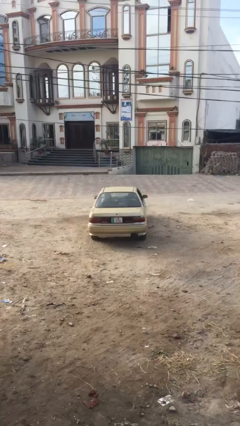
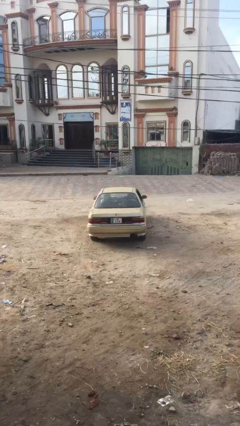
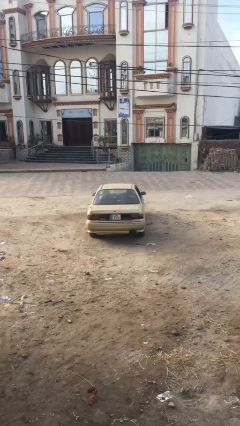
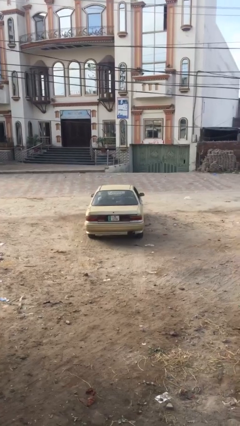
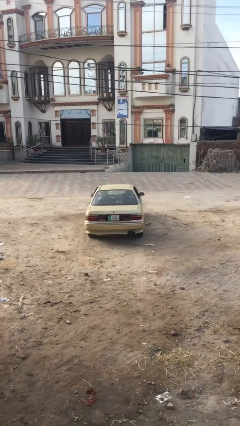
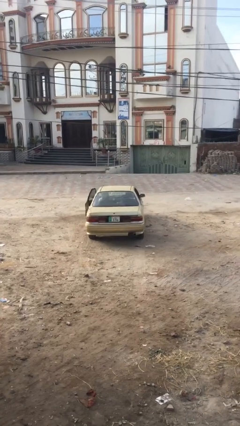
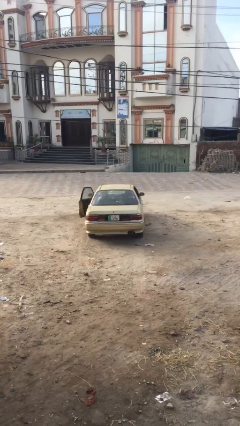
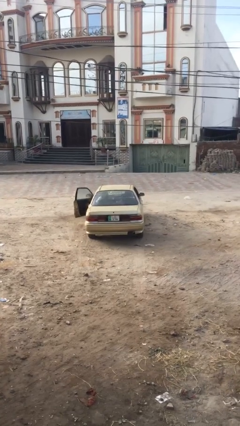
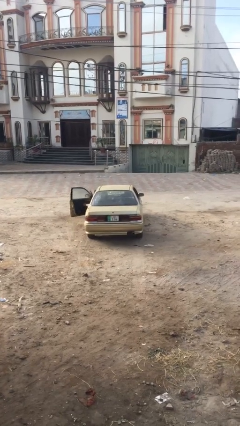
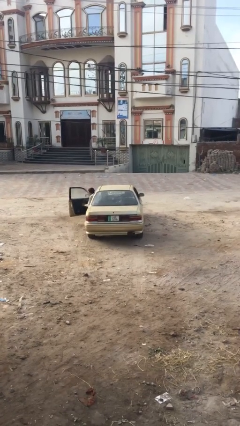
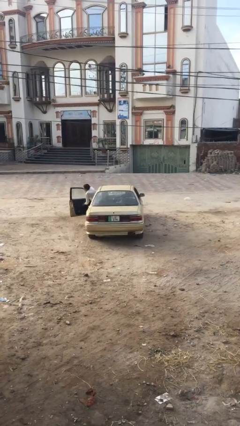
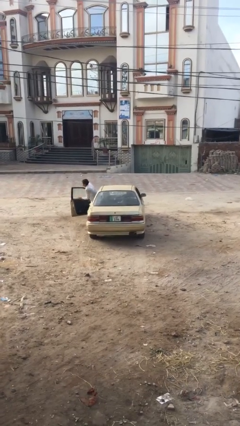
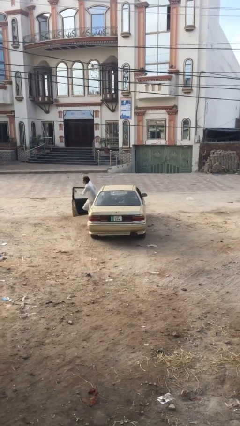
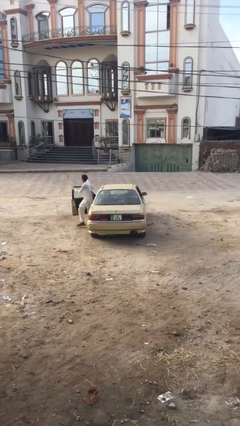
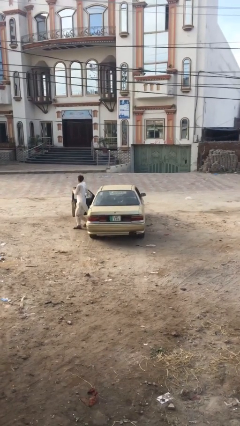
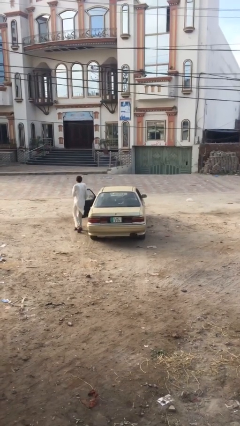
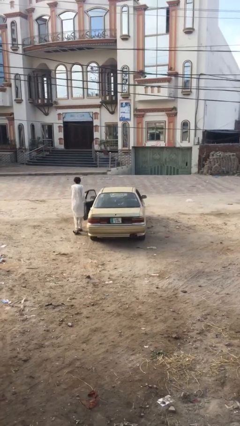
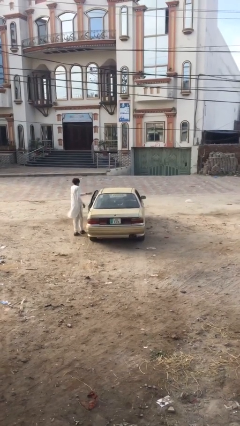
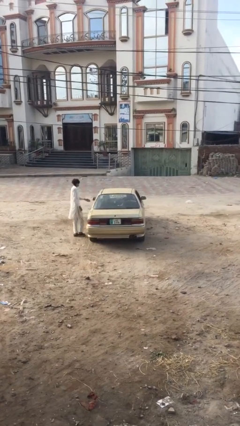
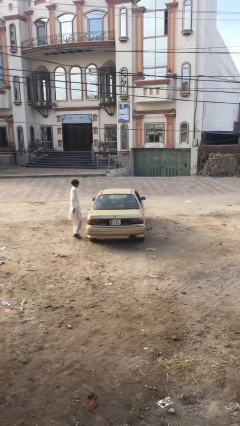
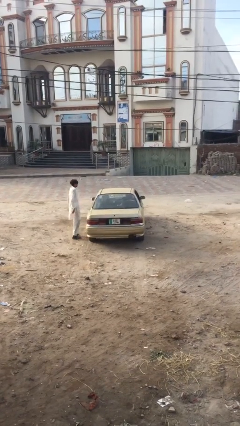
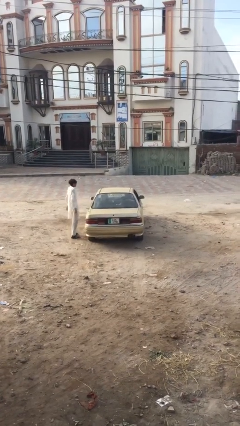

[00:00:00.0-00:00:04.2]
car drops off person

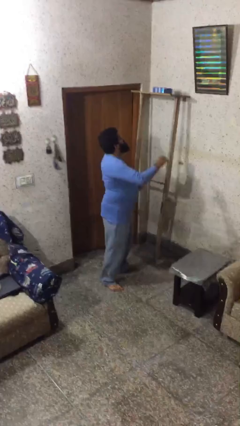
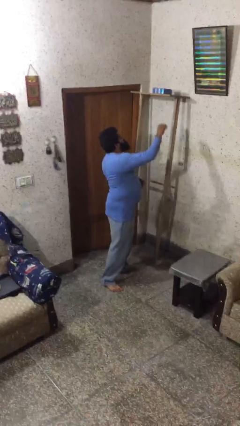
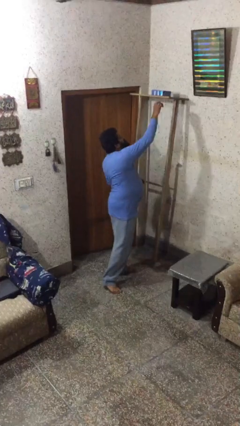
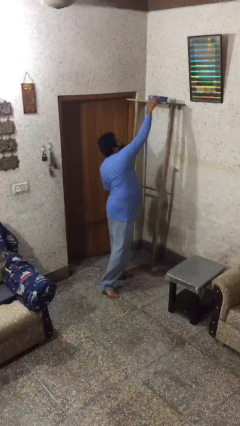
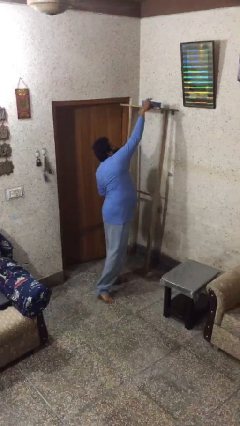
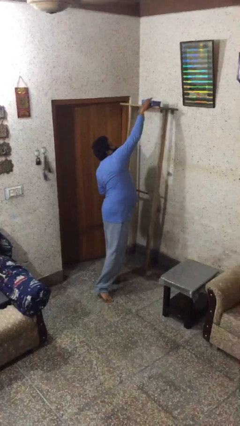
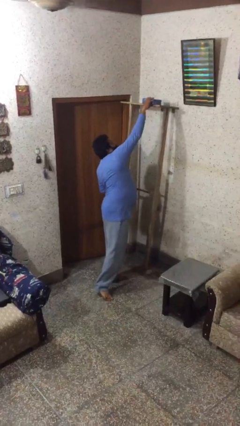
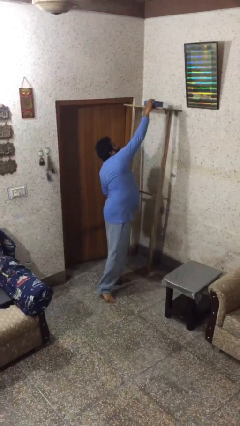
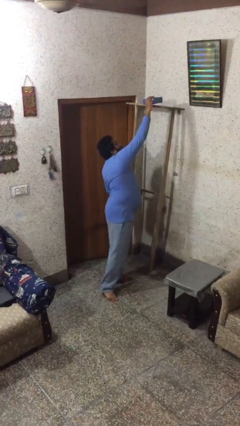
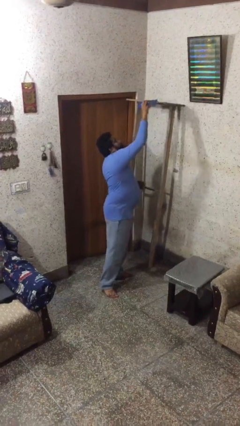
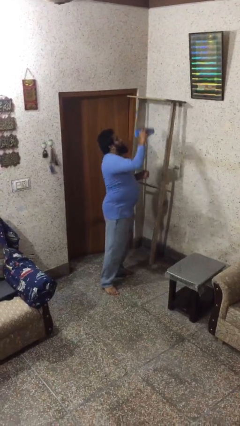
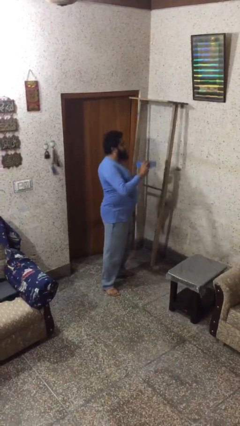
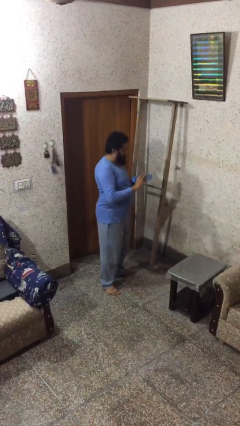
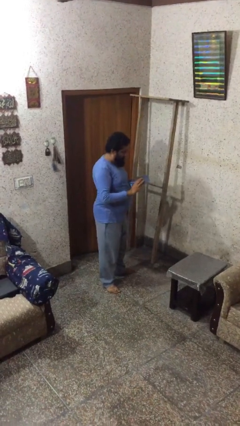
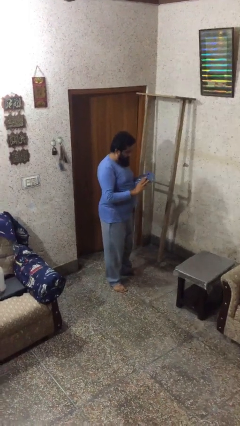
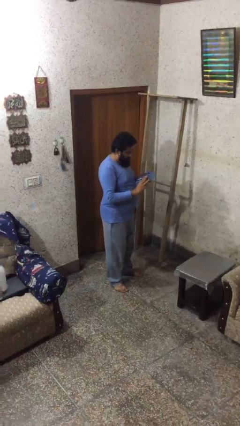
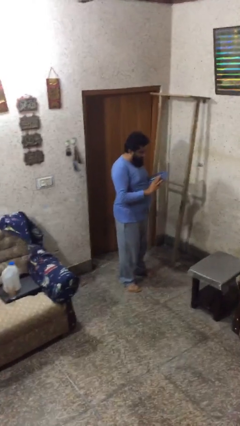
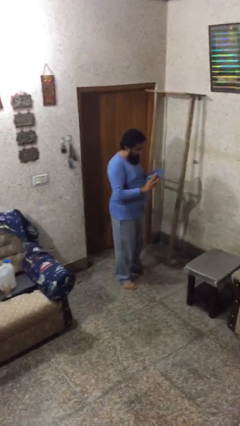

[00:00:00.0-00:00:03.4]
person picks up object from shelf

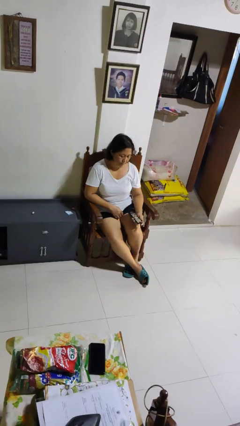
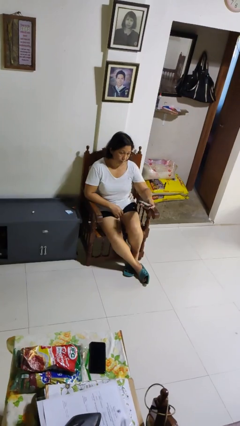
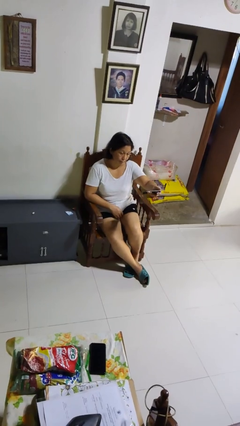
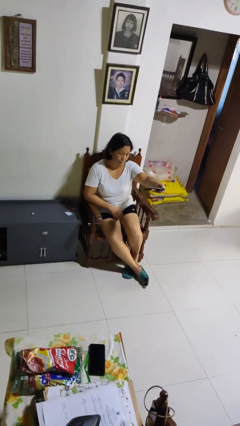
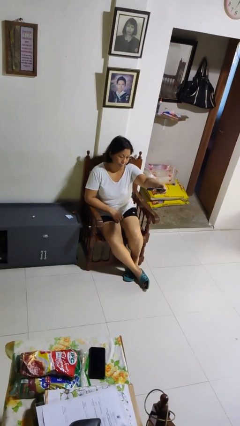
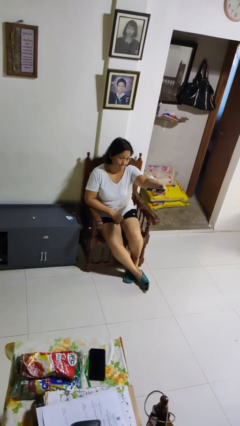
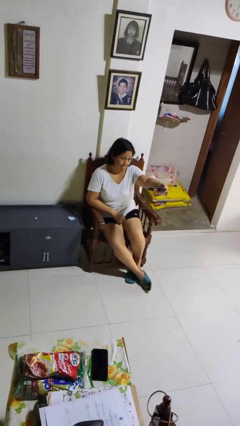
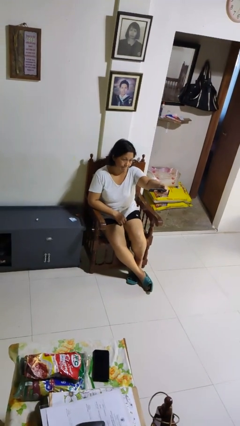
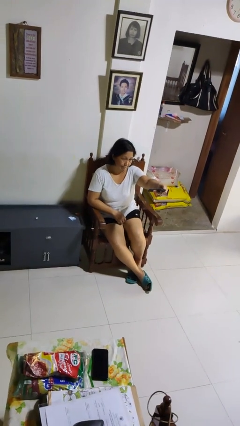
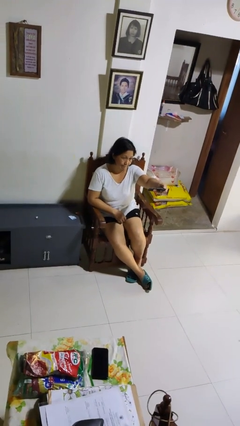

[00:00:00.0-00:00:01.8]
person uses television remote

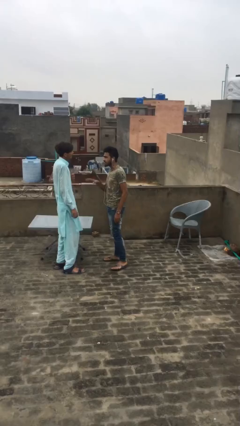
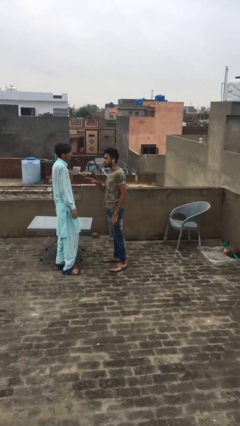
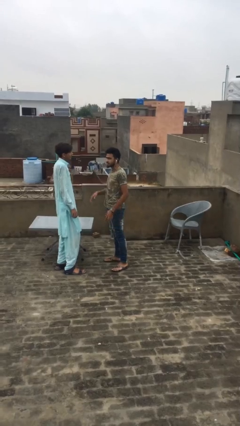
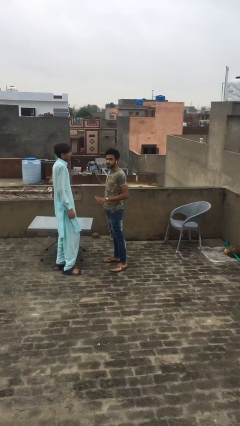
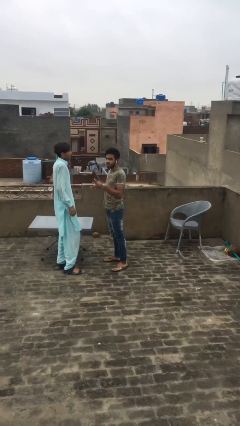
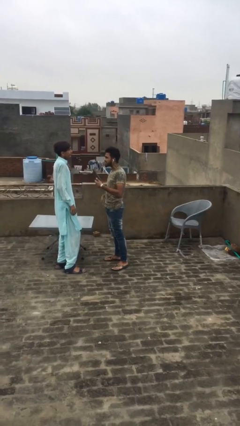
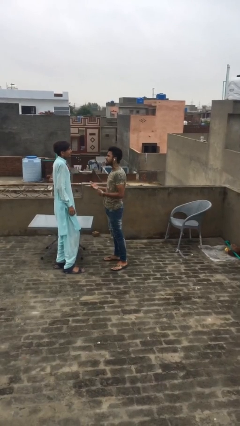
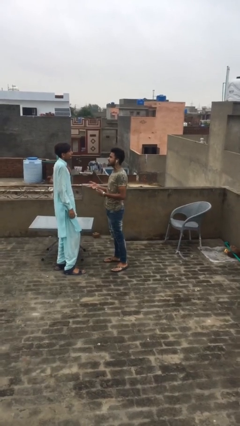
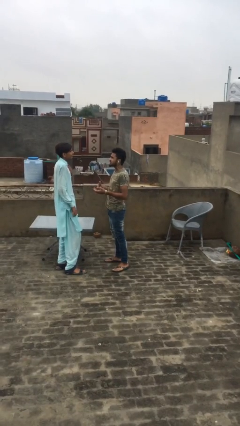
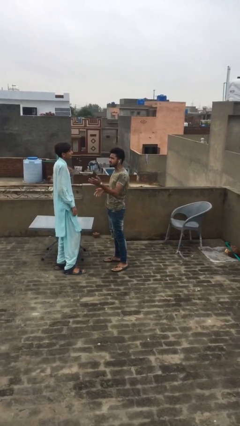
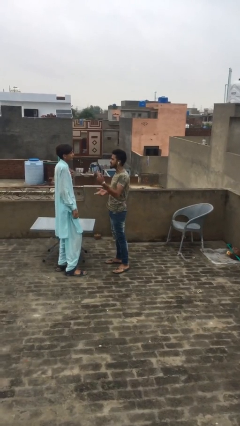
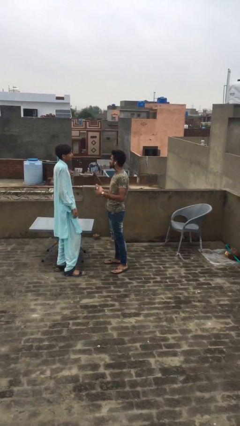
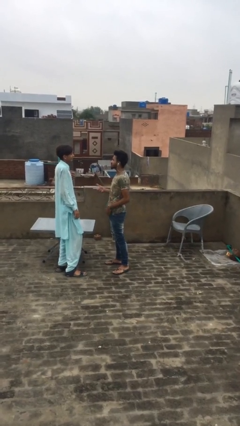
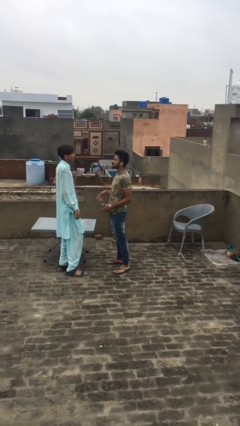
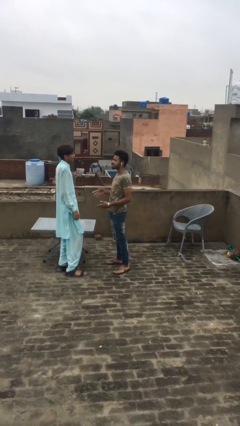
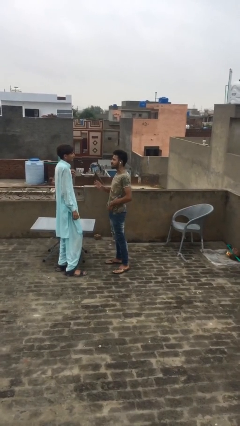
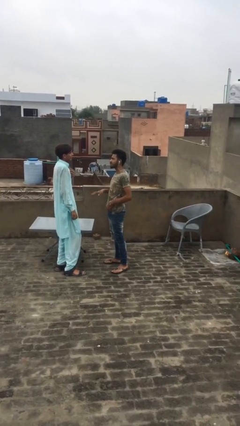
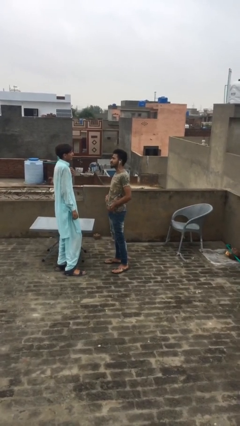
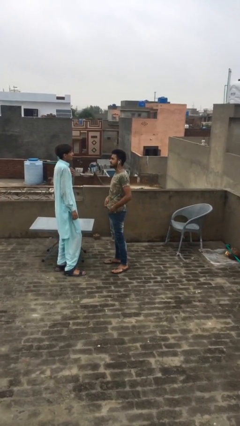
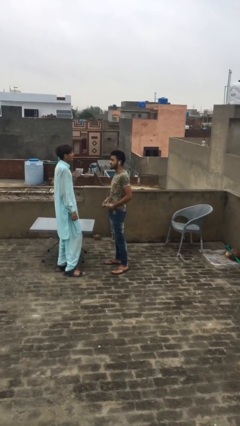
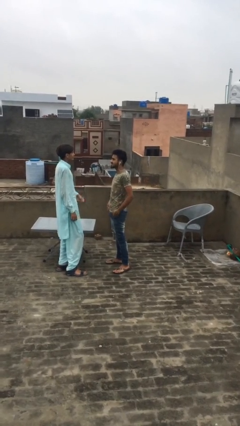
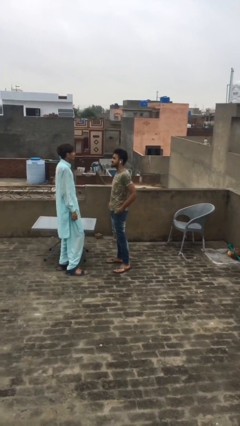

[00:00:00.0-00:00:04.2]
person talks to person

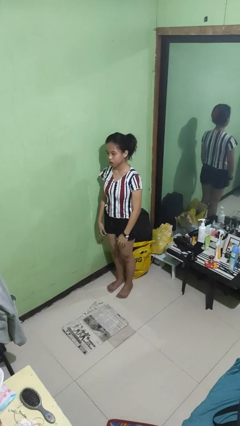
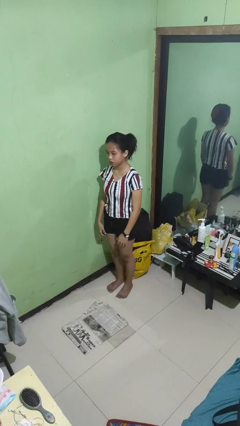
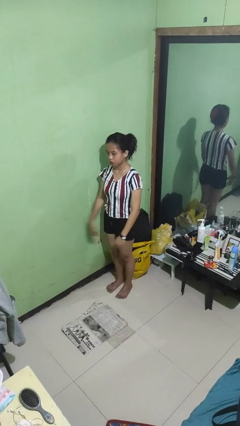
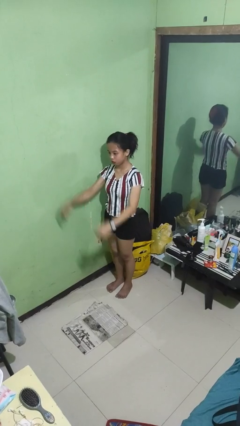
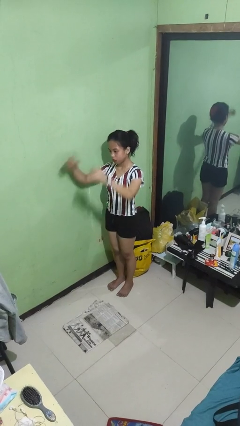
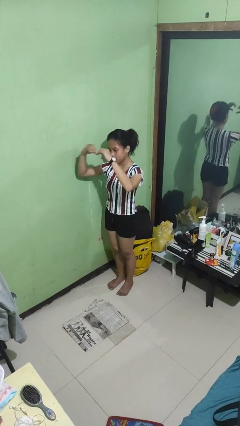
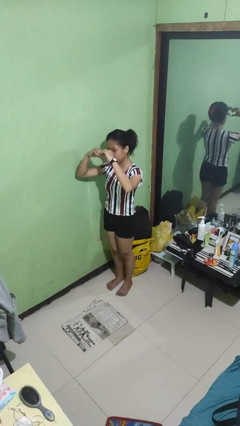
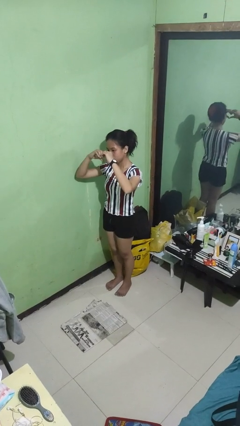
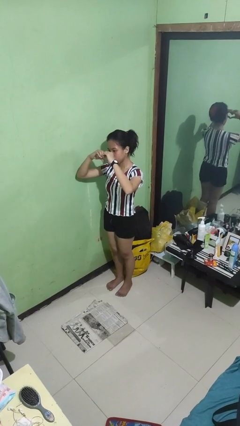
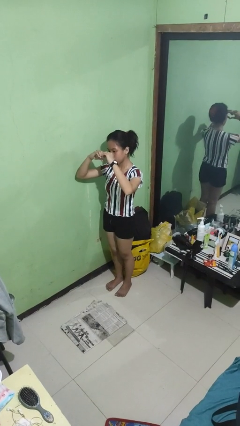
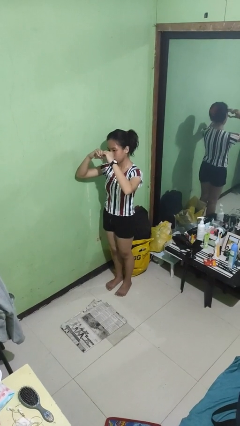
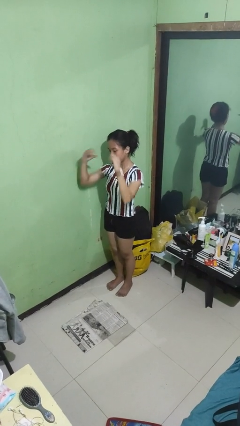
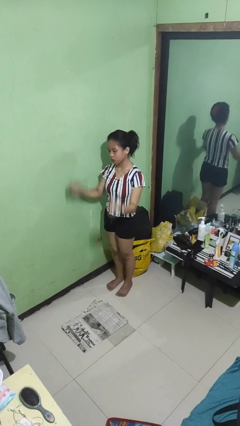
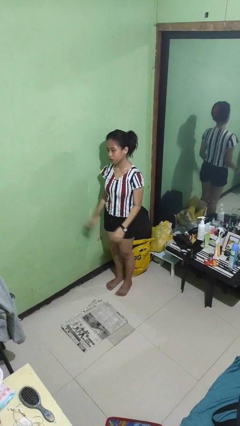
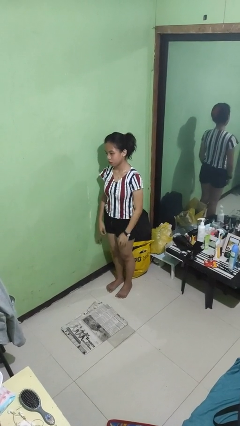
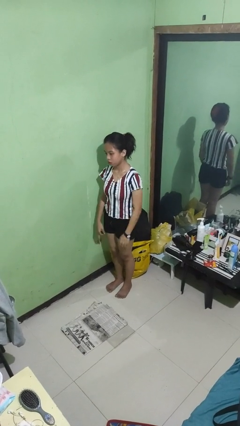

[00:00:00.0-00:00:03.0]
person gestures heart

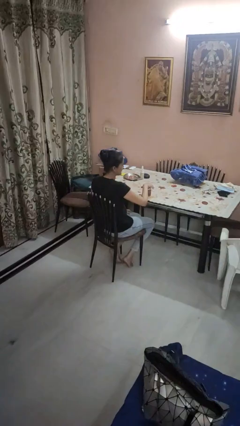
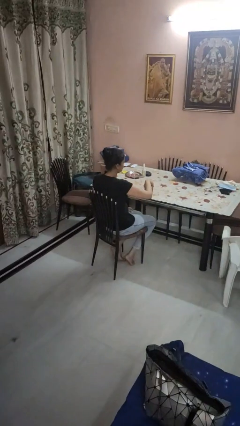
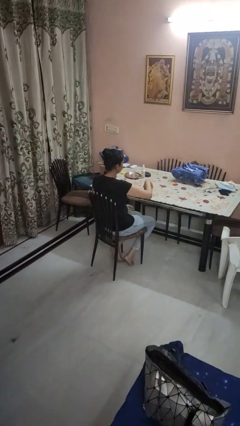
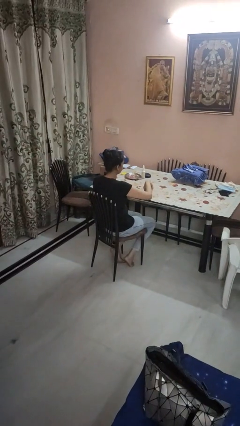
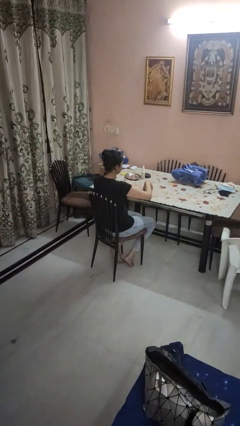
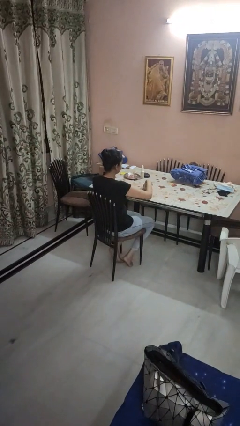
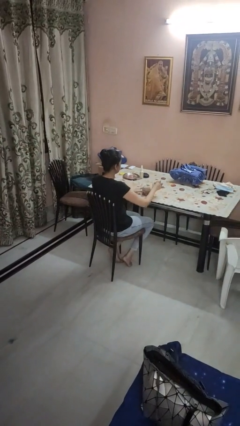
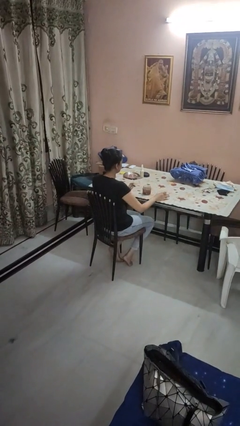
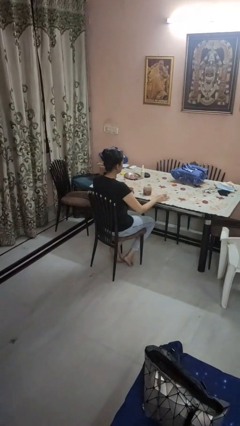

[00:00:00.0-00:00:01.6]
person opens jar
